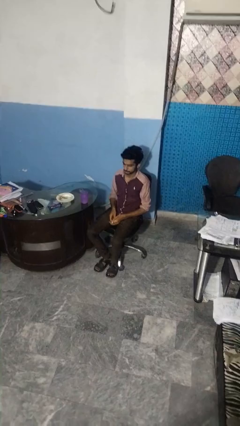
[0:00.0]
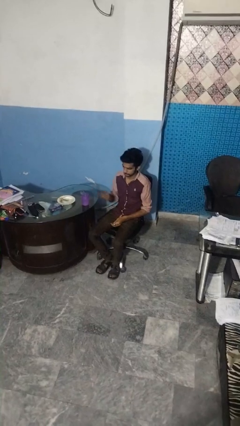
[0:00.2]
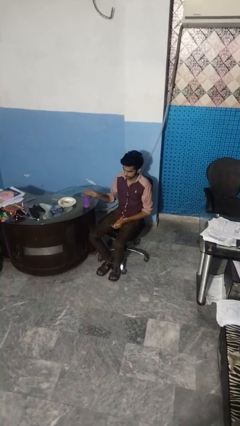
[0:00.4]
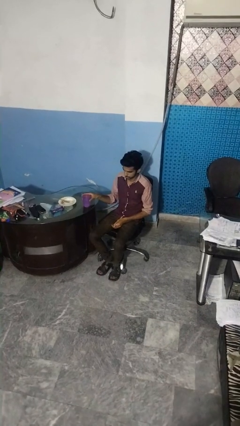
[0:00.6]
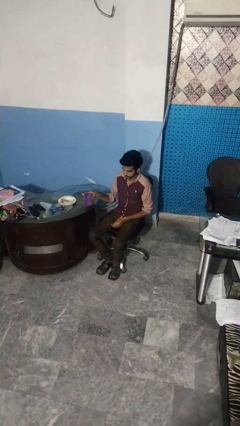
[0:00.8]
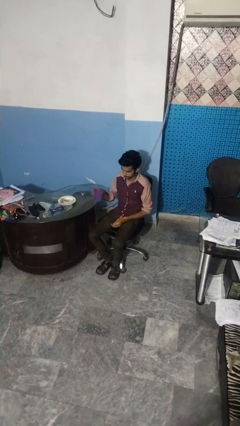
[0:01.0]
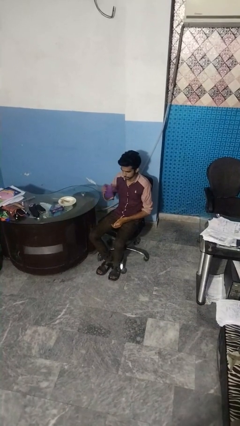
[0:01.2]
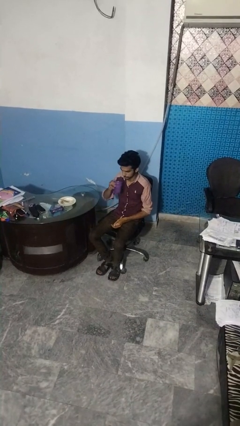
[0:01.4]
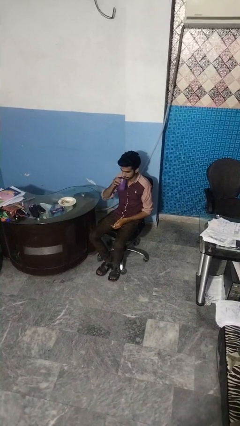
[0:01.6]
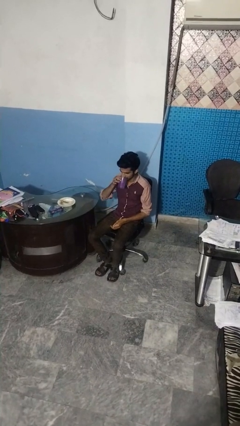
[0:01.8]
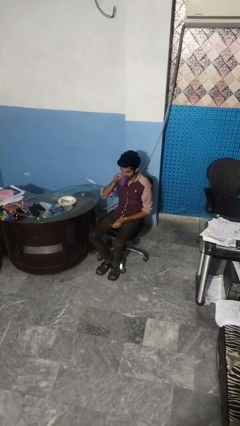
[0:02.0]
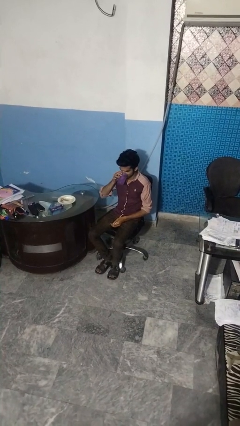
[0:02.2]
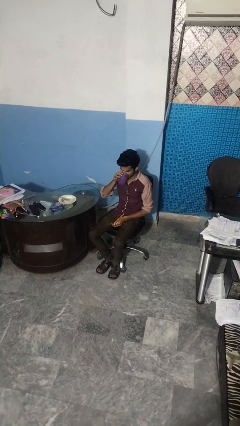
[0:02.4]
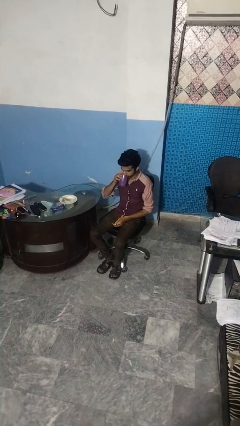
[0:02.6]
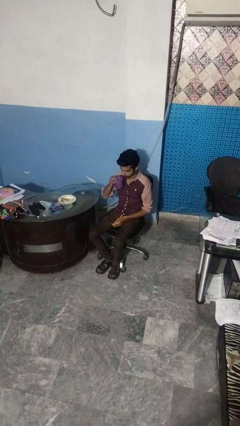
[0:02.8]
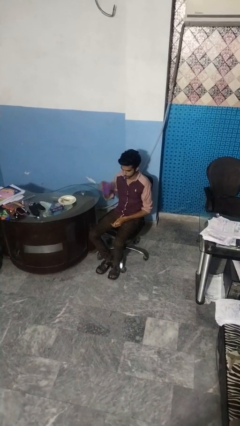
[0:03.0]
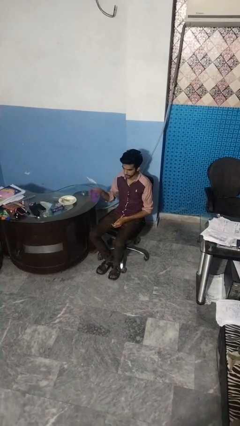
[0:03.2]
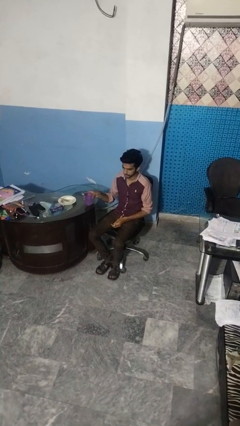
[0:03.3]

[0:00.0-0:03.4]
person drinks from cup

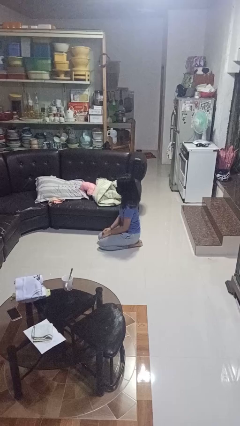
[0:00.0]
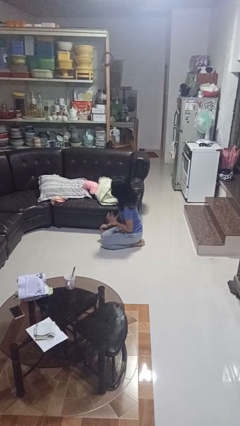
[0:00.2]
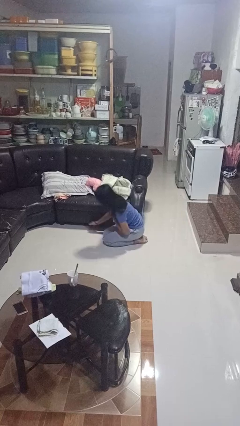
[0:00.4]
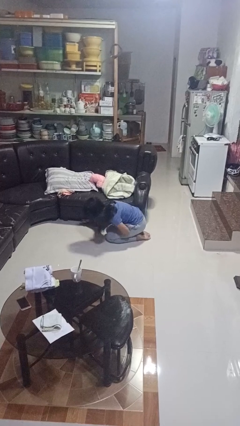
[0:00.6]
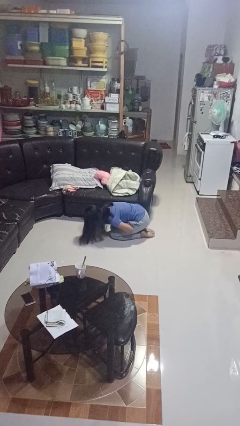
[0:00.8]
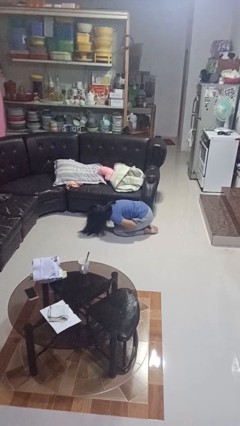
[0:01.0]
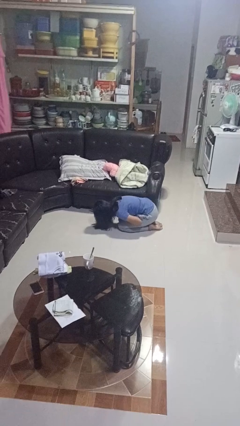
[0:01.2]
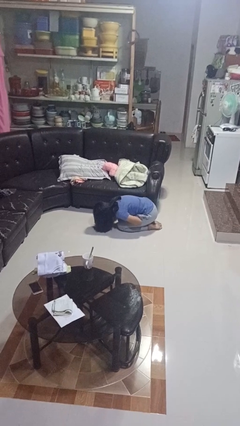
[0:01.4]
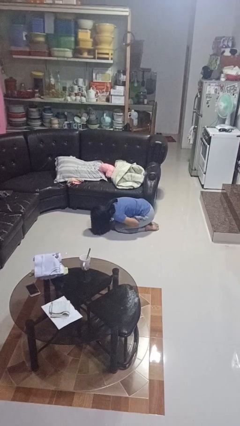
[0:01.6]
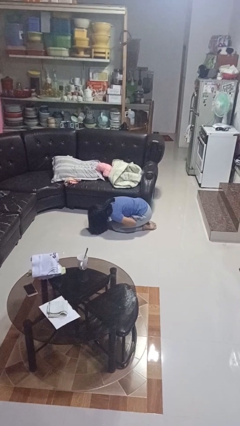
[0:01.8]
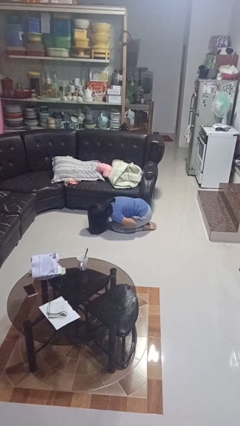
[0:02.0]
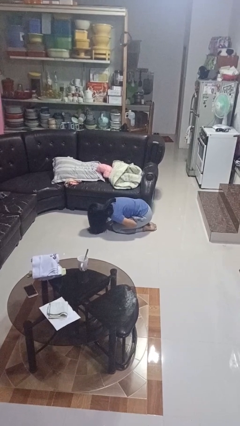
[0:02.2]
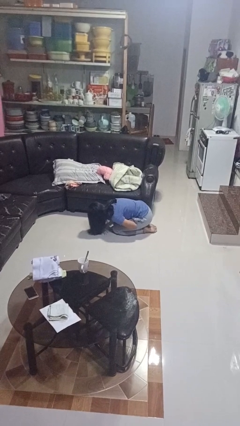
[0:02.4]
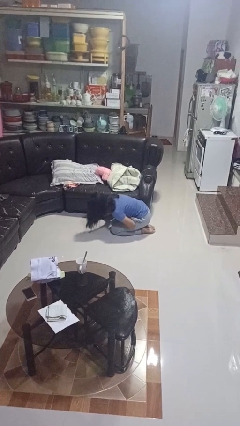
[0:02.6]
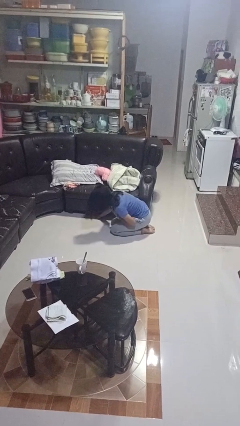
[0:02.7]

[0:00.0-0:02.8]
person searches under couch

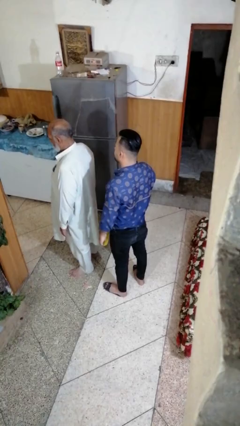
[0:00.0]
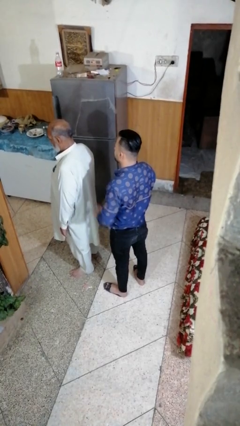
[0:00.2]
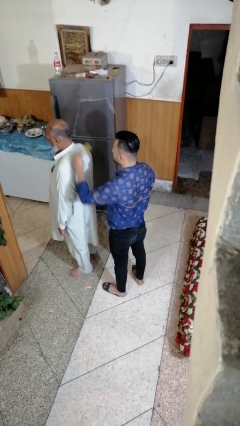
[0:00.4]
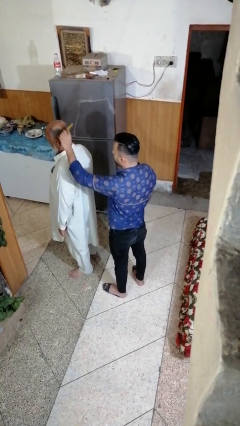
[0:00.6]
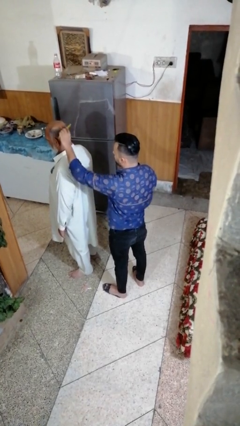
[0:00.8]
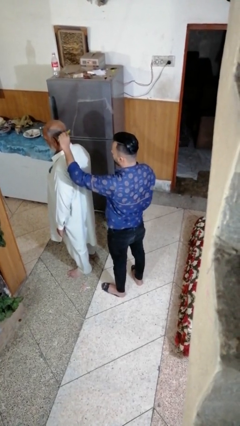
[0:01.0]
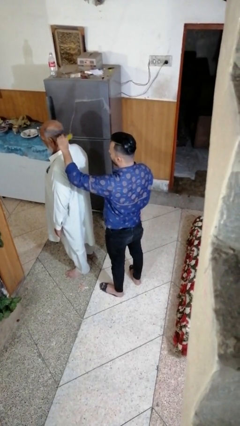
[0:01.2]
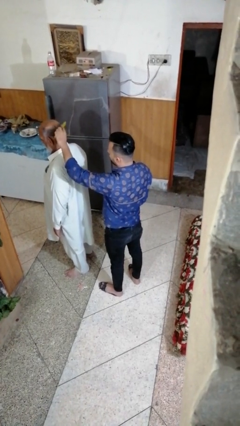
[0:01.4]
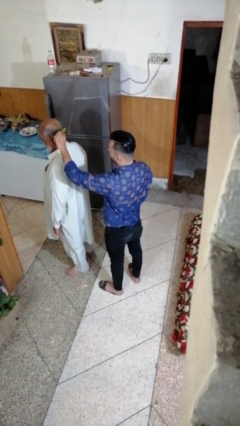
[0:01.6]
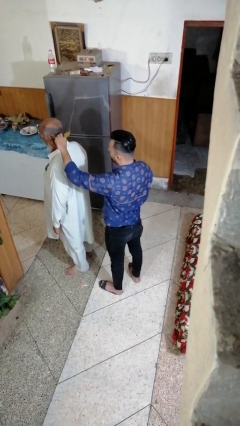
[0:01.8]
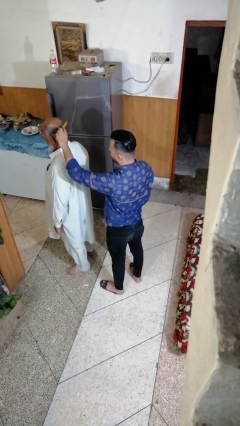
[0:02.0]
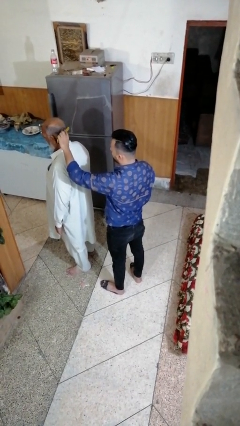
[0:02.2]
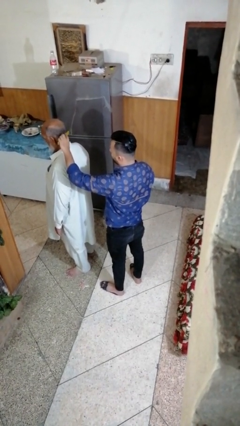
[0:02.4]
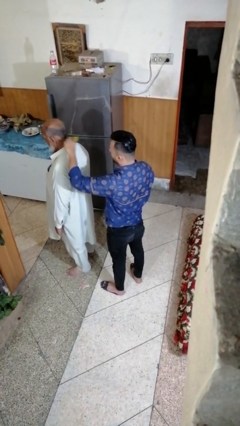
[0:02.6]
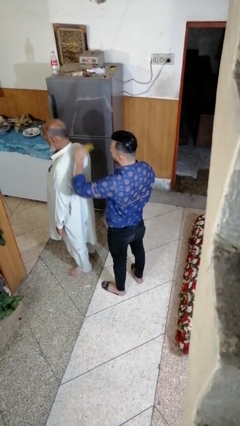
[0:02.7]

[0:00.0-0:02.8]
person brushes hair of person

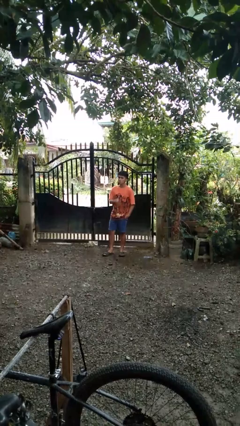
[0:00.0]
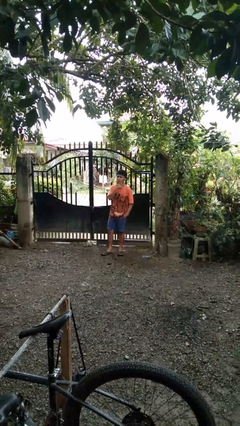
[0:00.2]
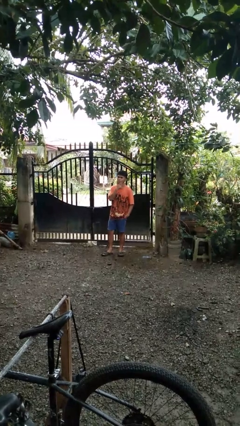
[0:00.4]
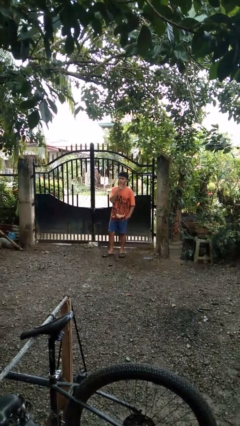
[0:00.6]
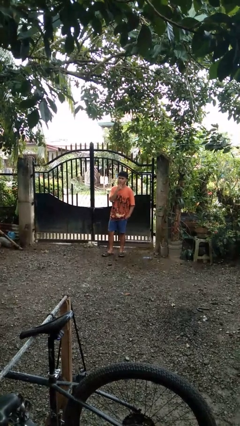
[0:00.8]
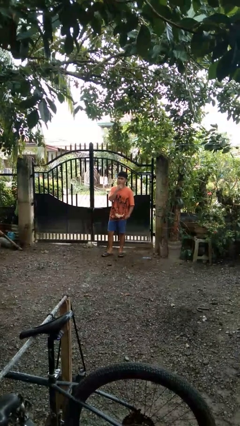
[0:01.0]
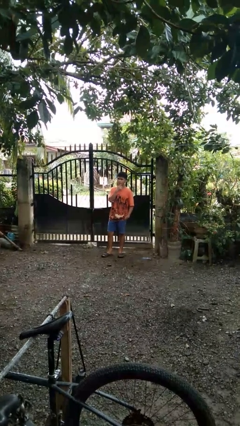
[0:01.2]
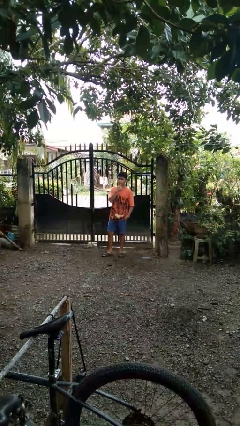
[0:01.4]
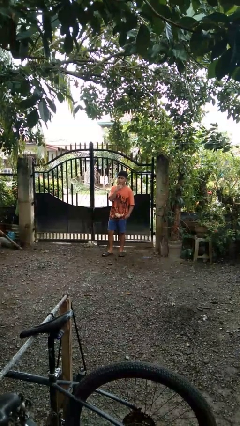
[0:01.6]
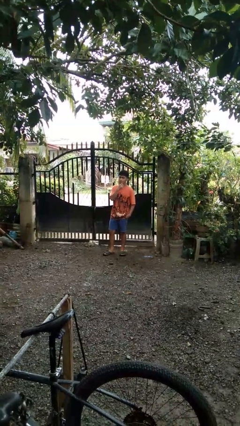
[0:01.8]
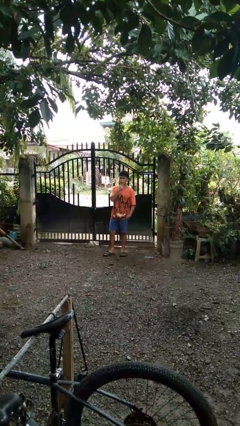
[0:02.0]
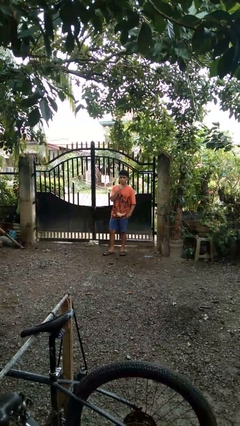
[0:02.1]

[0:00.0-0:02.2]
person strokes chin

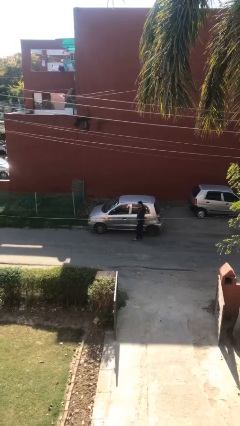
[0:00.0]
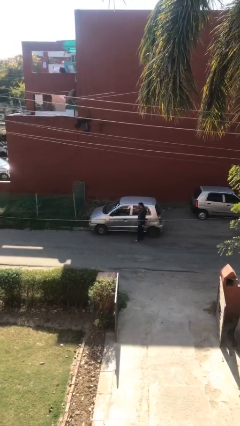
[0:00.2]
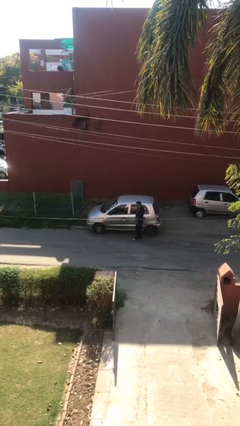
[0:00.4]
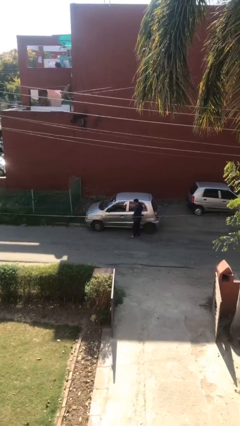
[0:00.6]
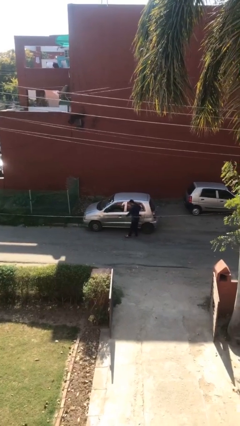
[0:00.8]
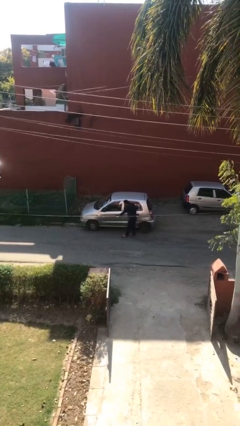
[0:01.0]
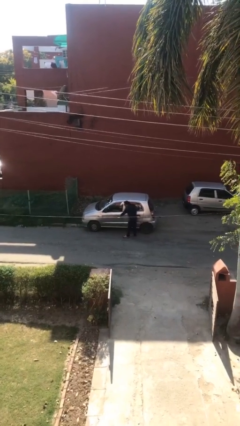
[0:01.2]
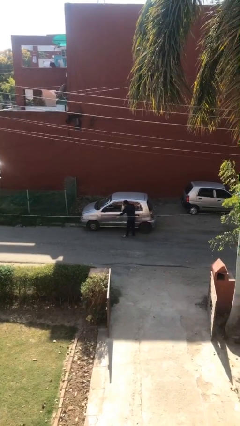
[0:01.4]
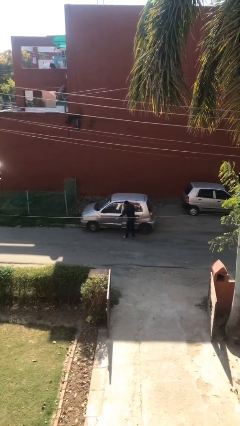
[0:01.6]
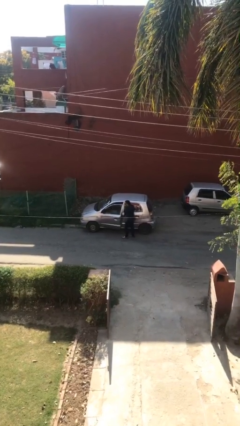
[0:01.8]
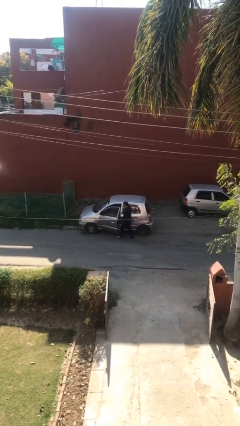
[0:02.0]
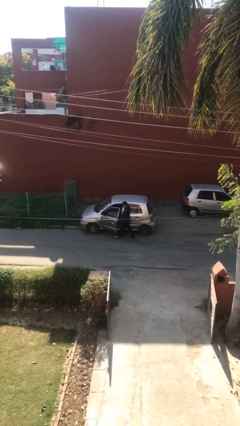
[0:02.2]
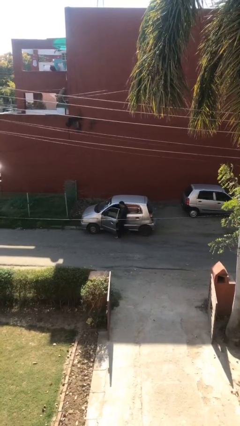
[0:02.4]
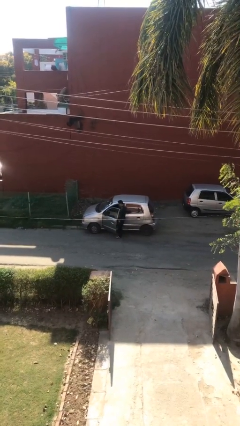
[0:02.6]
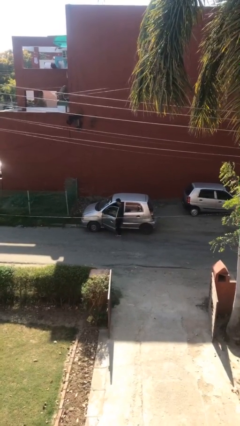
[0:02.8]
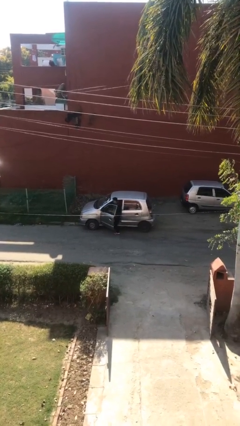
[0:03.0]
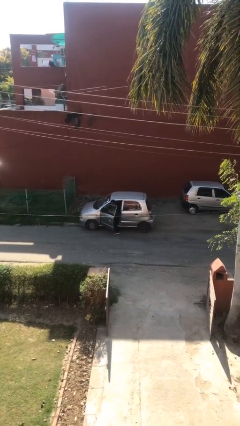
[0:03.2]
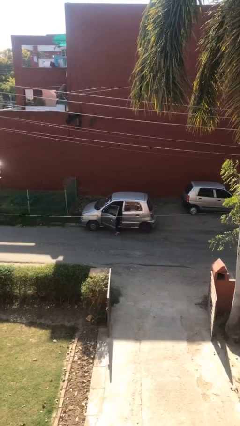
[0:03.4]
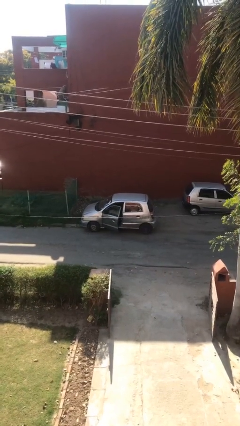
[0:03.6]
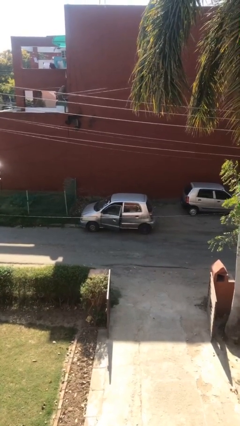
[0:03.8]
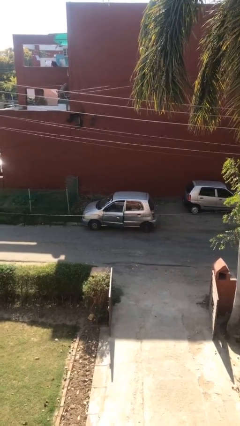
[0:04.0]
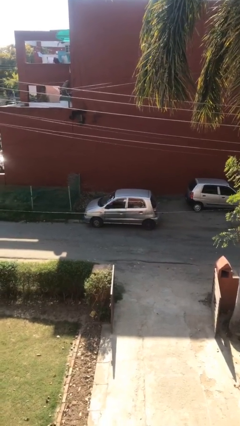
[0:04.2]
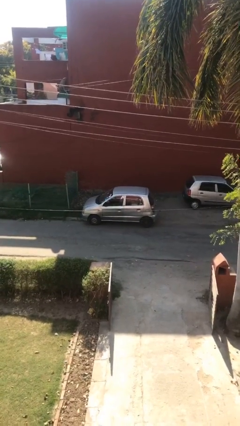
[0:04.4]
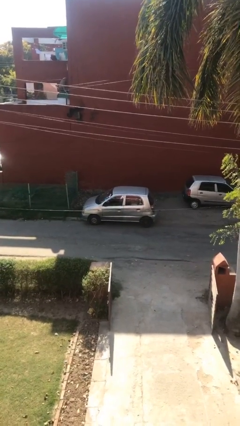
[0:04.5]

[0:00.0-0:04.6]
car picks up person

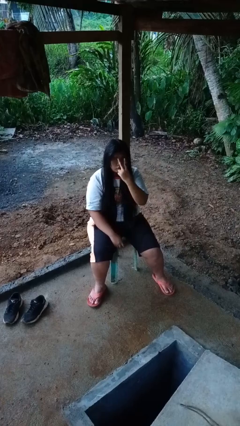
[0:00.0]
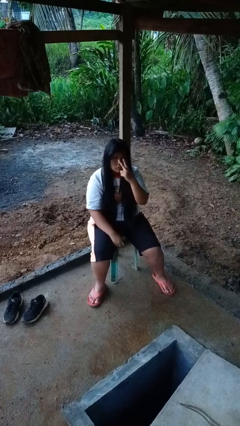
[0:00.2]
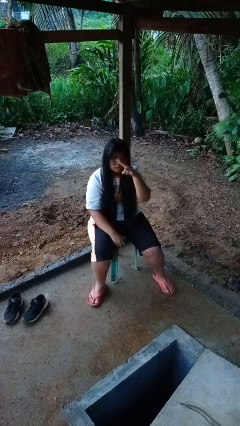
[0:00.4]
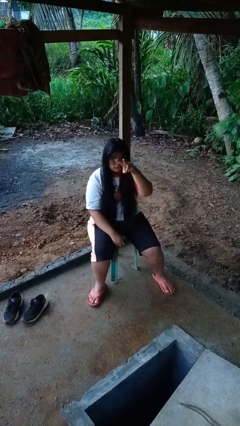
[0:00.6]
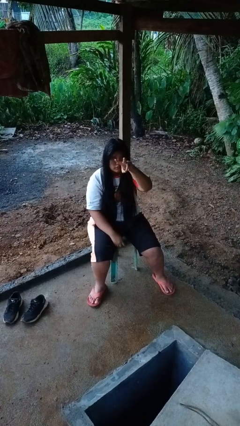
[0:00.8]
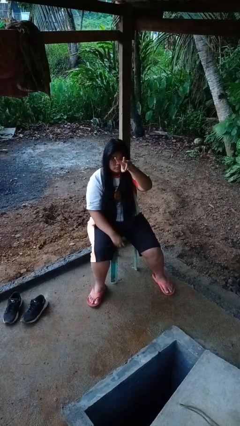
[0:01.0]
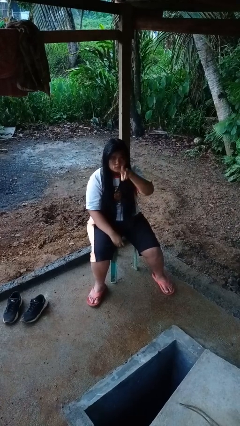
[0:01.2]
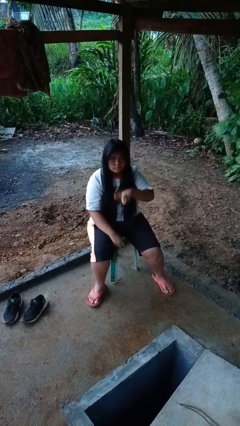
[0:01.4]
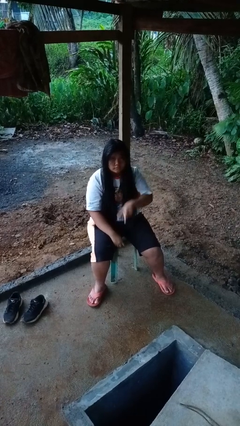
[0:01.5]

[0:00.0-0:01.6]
person gestures watch closely
